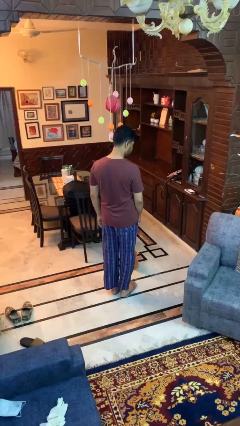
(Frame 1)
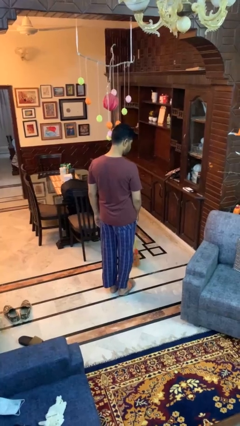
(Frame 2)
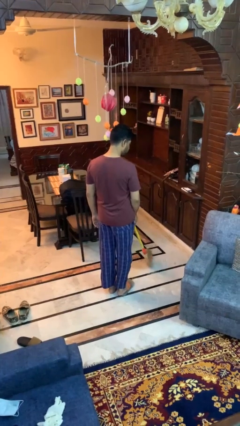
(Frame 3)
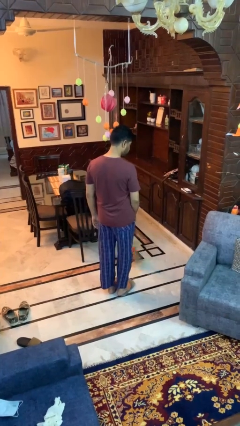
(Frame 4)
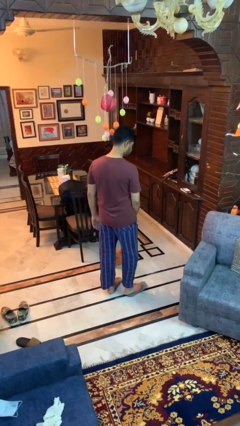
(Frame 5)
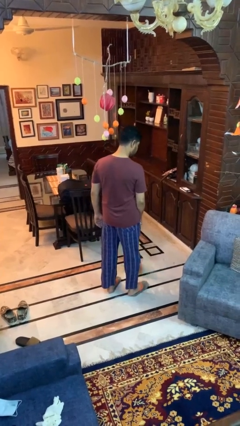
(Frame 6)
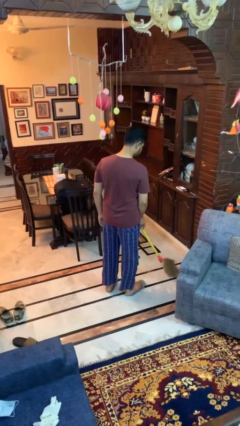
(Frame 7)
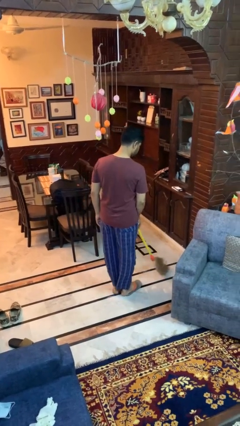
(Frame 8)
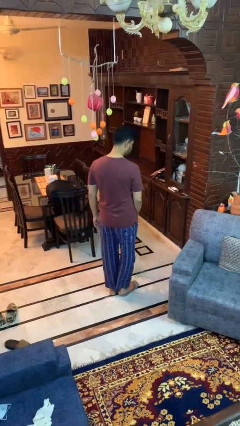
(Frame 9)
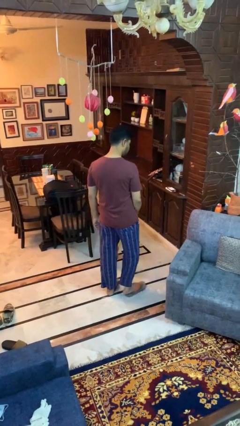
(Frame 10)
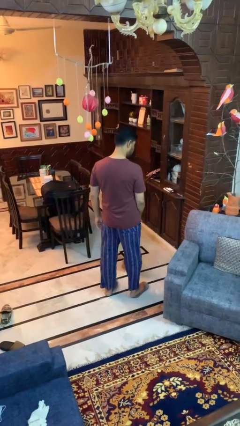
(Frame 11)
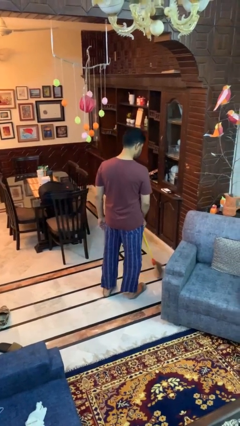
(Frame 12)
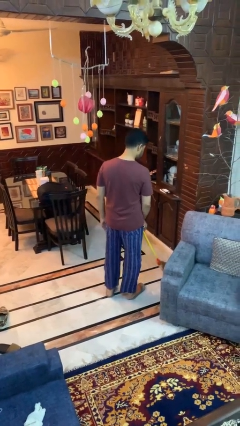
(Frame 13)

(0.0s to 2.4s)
person sweeps floor

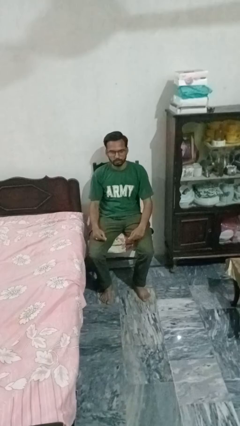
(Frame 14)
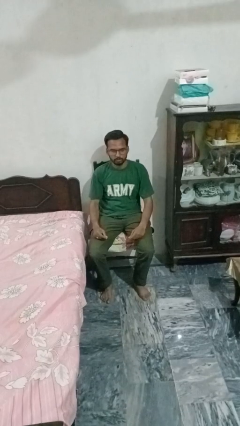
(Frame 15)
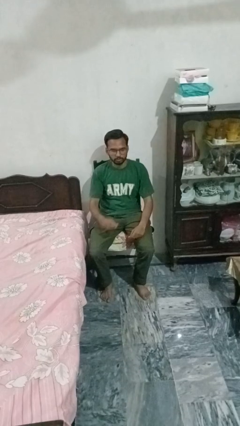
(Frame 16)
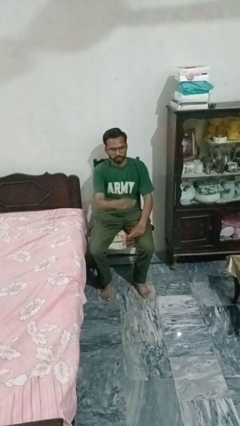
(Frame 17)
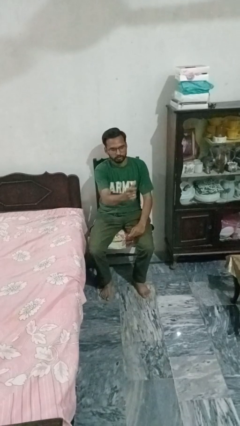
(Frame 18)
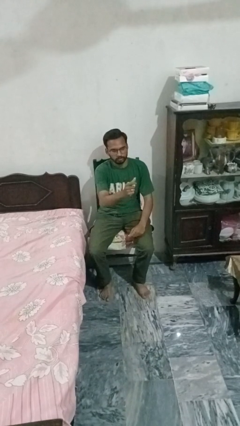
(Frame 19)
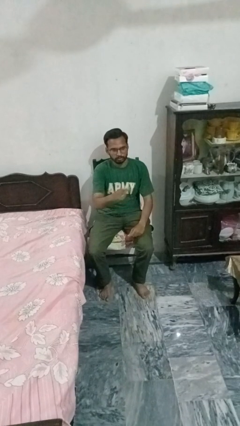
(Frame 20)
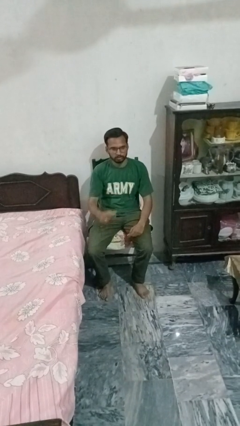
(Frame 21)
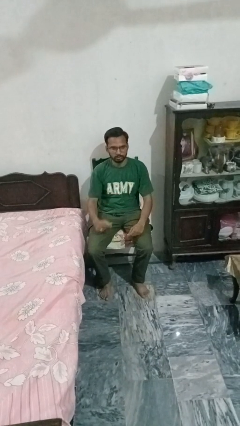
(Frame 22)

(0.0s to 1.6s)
person snaps fingers

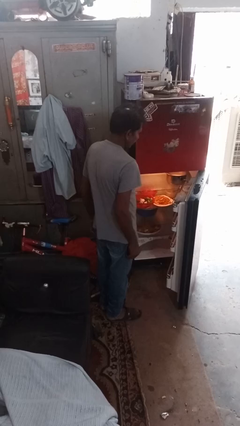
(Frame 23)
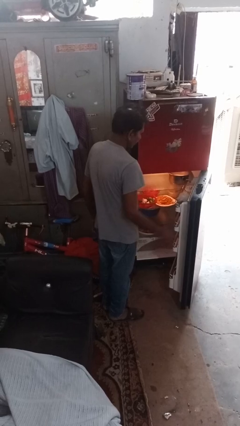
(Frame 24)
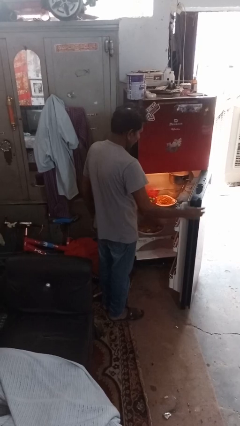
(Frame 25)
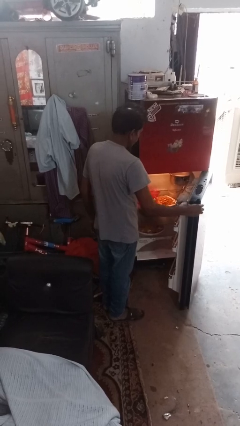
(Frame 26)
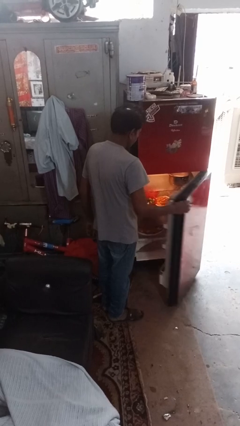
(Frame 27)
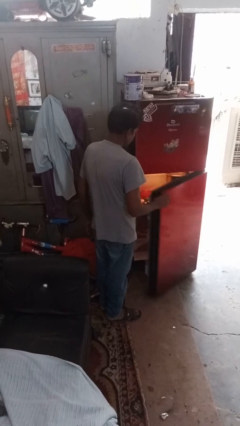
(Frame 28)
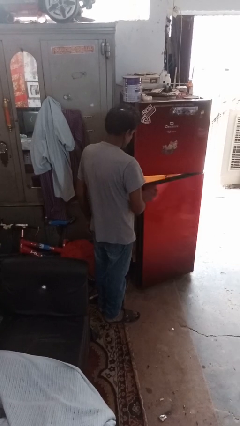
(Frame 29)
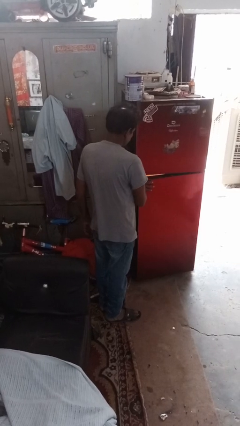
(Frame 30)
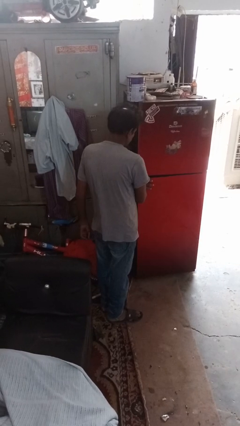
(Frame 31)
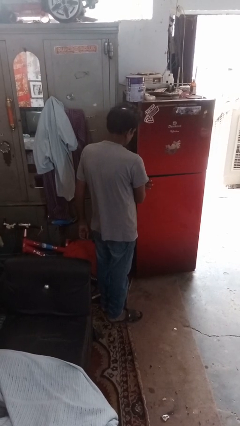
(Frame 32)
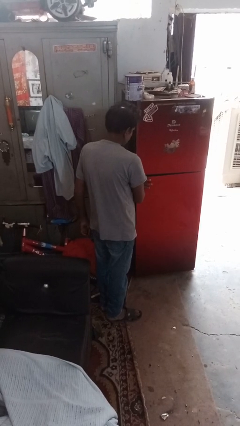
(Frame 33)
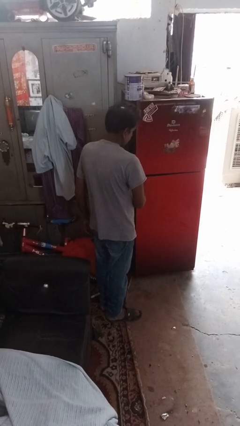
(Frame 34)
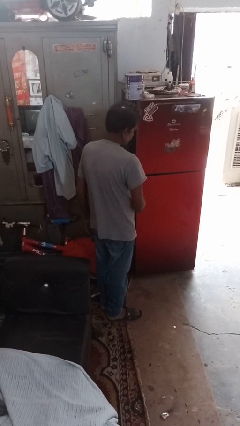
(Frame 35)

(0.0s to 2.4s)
person closes refrigerator

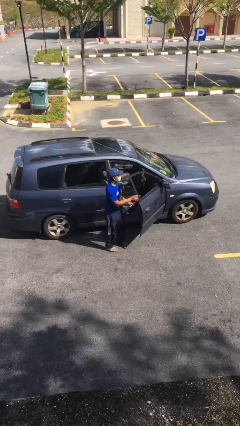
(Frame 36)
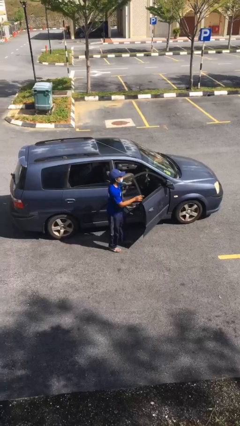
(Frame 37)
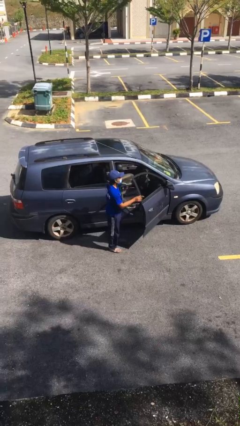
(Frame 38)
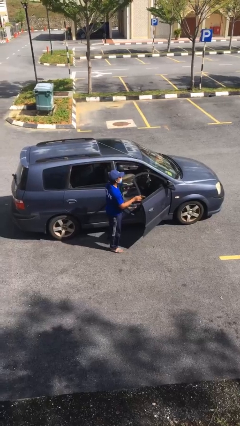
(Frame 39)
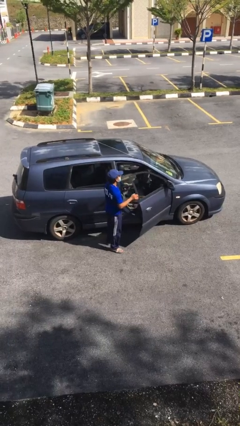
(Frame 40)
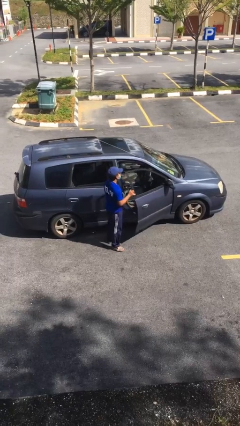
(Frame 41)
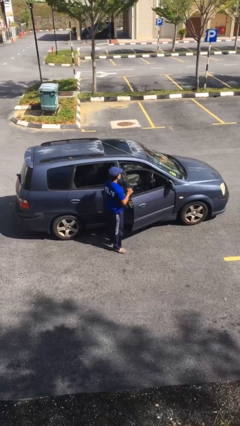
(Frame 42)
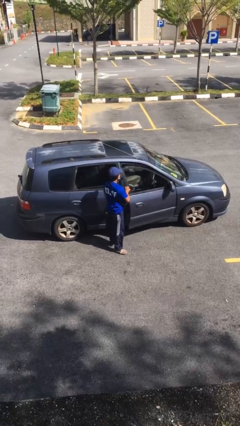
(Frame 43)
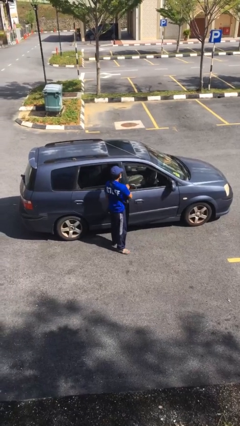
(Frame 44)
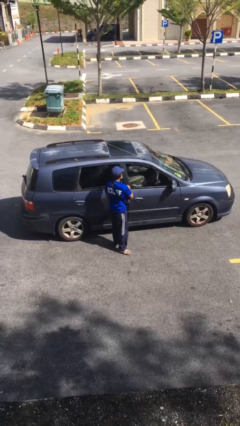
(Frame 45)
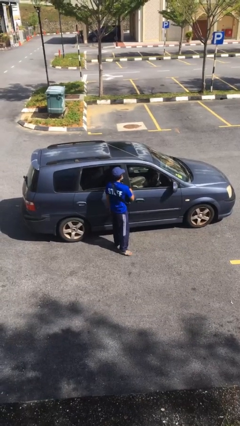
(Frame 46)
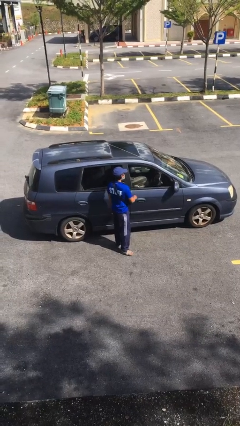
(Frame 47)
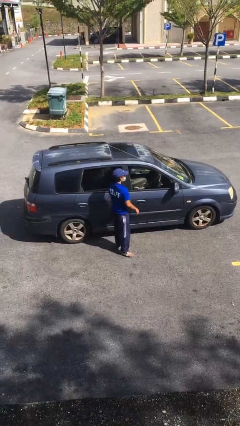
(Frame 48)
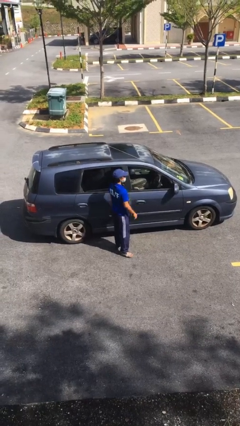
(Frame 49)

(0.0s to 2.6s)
person closes car door

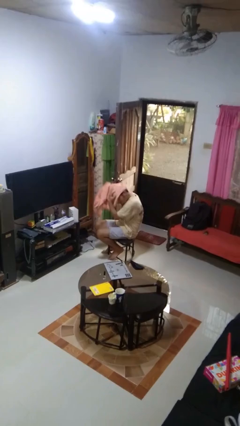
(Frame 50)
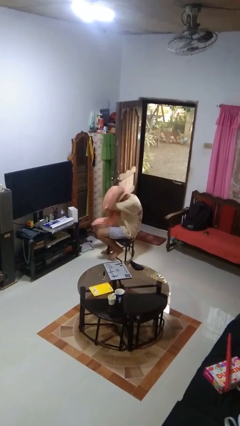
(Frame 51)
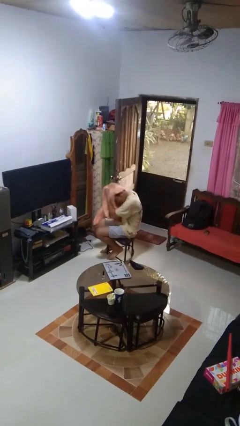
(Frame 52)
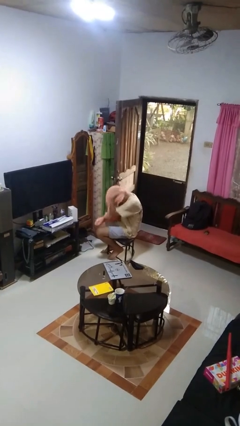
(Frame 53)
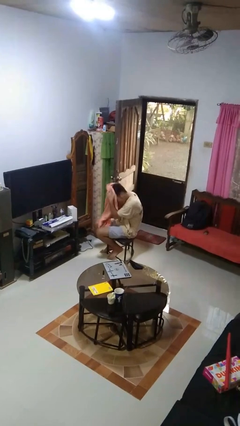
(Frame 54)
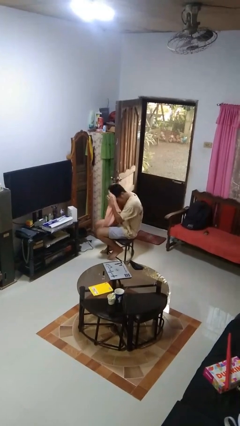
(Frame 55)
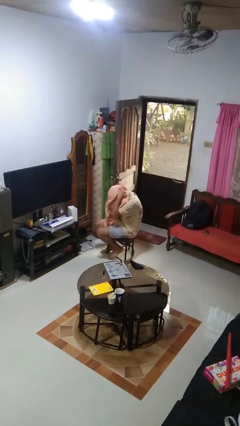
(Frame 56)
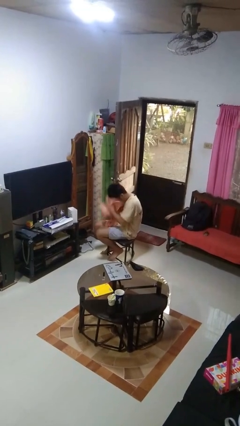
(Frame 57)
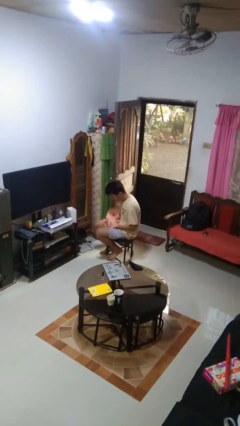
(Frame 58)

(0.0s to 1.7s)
person dries hair with towel

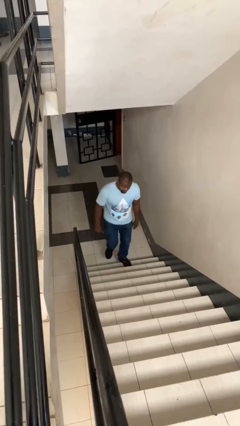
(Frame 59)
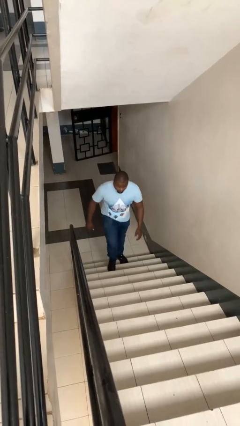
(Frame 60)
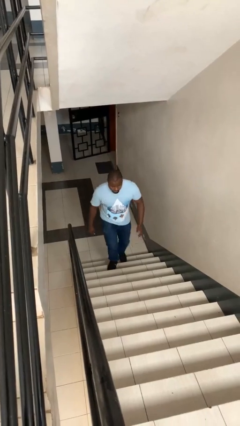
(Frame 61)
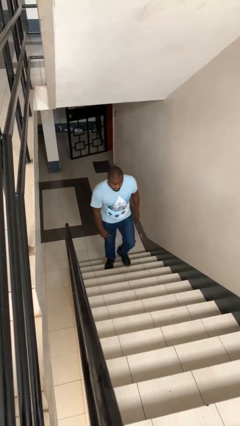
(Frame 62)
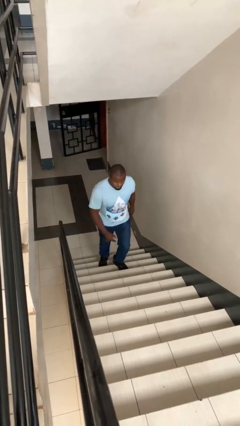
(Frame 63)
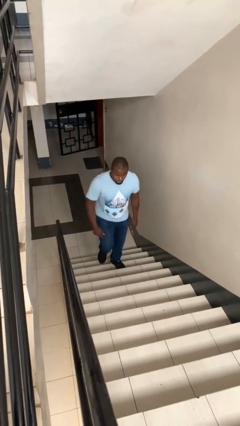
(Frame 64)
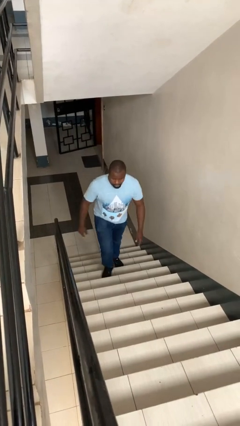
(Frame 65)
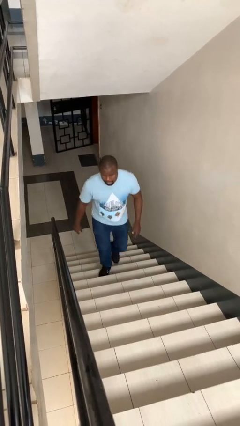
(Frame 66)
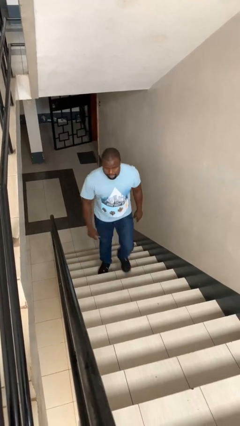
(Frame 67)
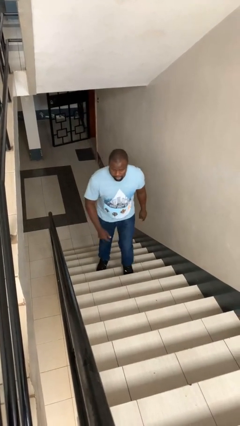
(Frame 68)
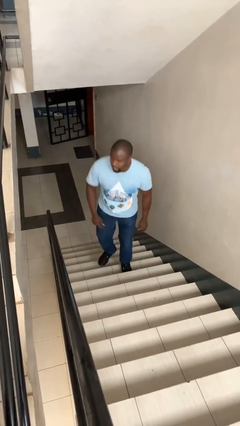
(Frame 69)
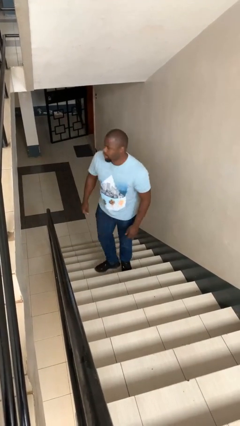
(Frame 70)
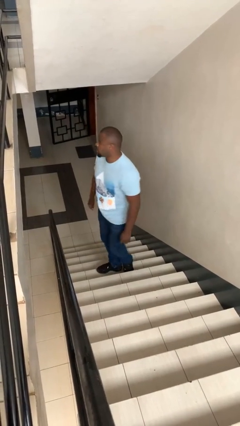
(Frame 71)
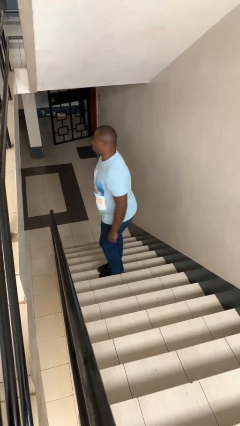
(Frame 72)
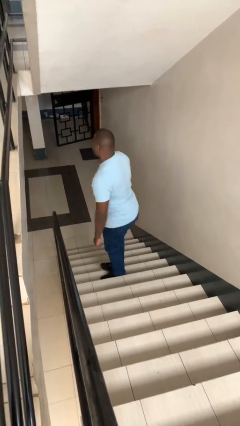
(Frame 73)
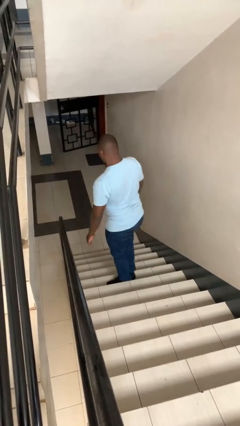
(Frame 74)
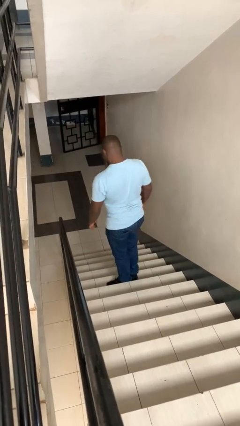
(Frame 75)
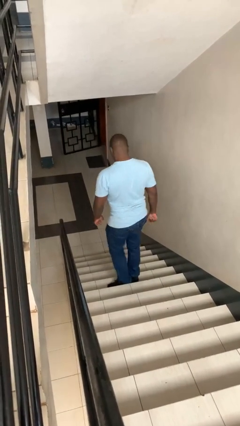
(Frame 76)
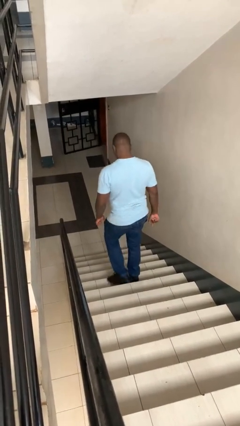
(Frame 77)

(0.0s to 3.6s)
person climbs up stairs

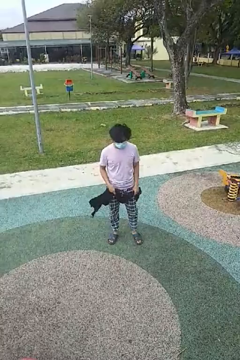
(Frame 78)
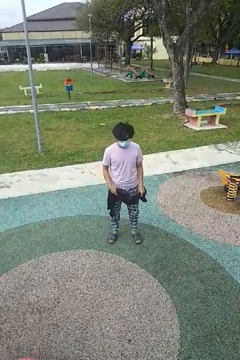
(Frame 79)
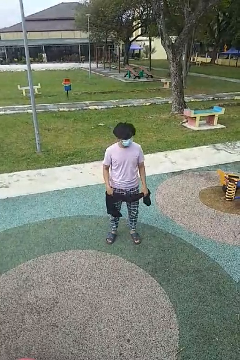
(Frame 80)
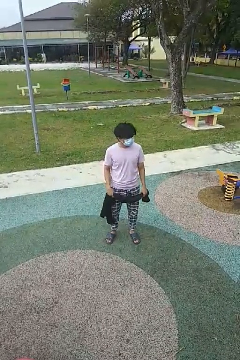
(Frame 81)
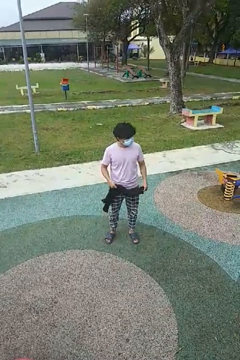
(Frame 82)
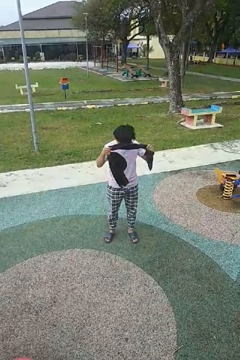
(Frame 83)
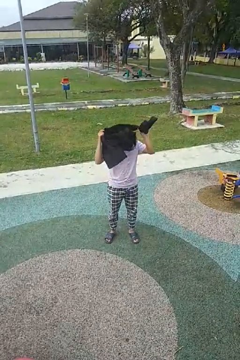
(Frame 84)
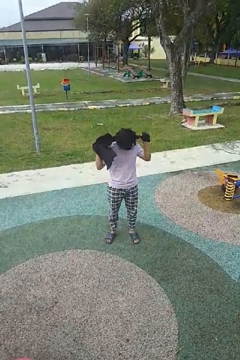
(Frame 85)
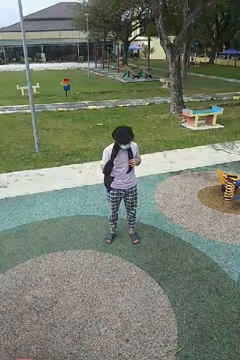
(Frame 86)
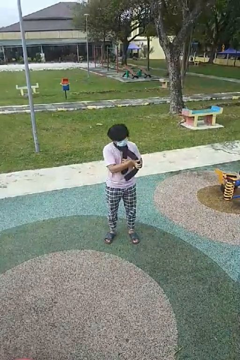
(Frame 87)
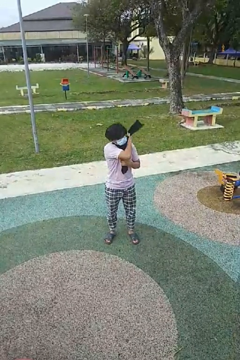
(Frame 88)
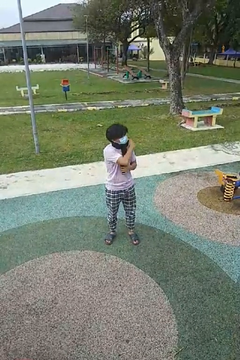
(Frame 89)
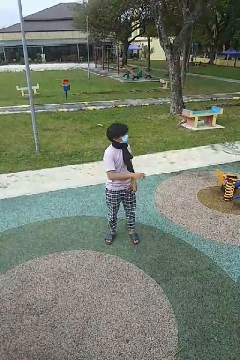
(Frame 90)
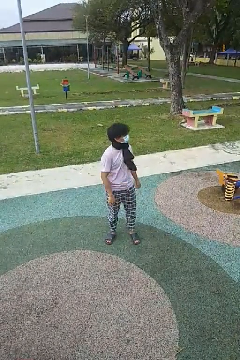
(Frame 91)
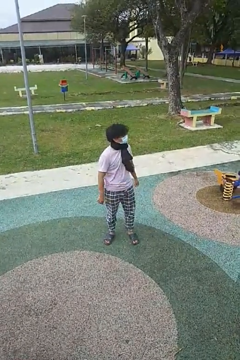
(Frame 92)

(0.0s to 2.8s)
person puts on scarf

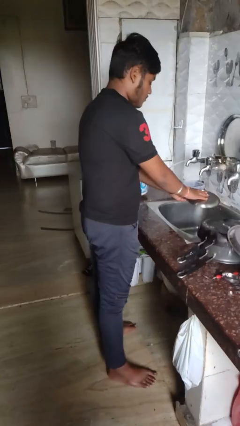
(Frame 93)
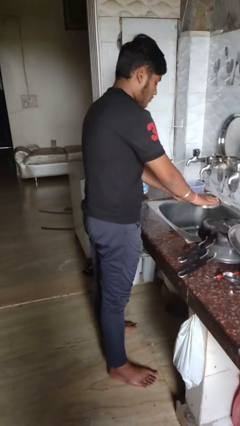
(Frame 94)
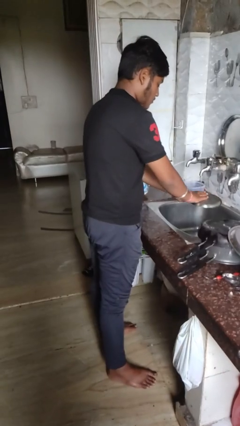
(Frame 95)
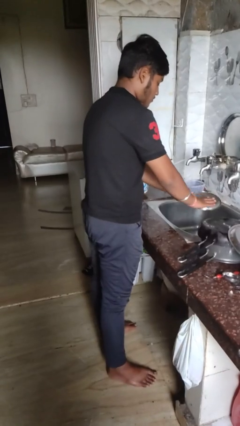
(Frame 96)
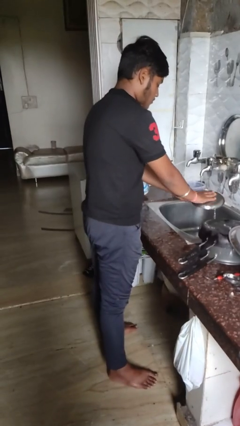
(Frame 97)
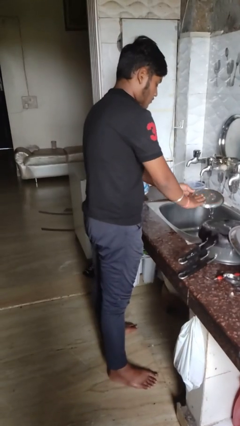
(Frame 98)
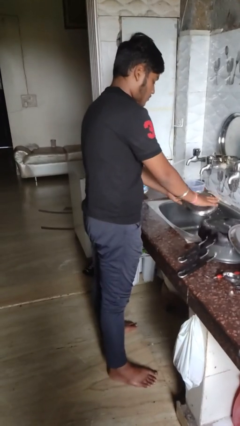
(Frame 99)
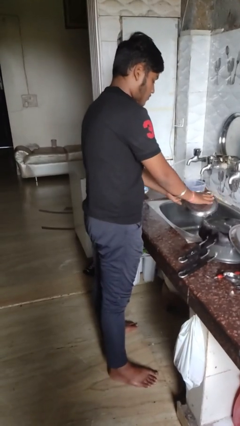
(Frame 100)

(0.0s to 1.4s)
person washes dish
